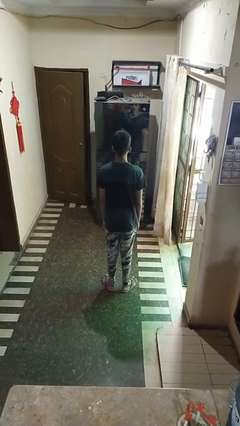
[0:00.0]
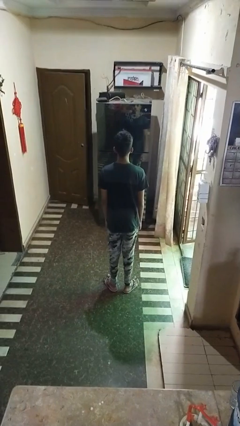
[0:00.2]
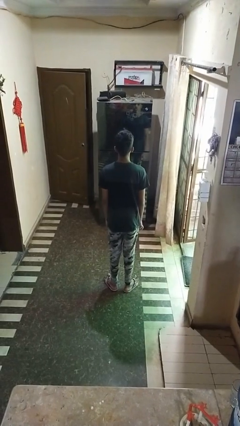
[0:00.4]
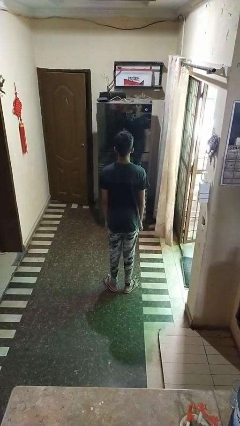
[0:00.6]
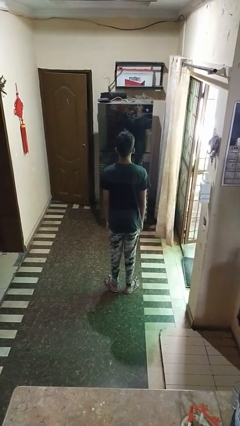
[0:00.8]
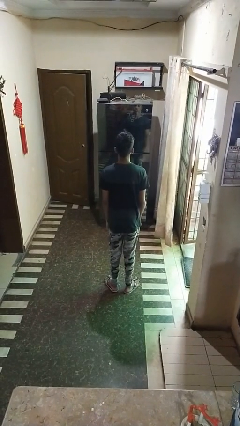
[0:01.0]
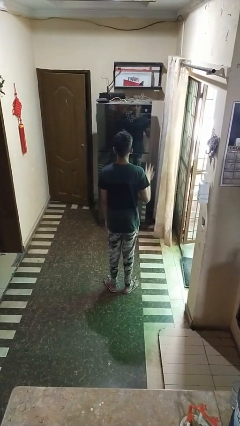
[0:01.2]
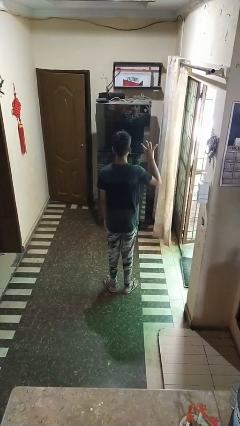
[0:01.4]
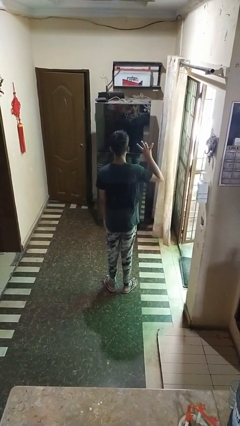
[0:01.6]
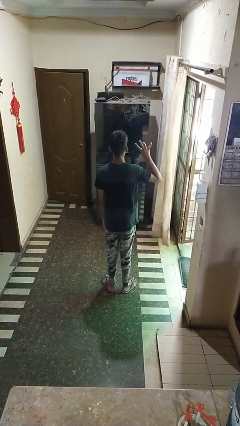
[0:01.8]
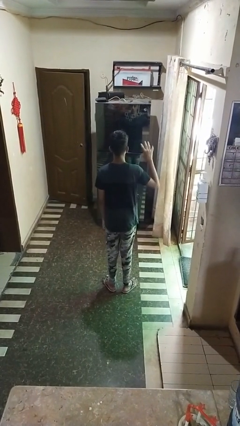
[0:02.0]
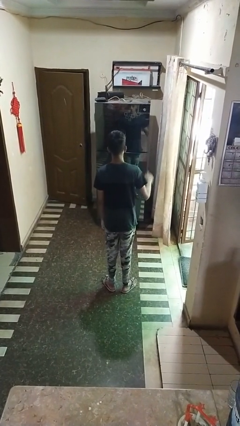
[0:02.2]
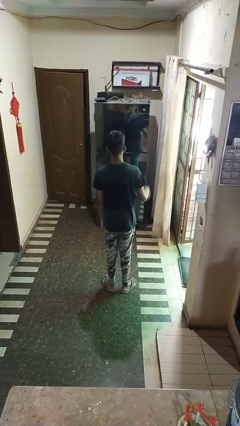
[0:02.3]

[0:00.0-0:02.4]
person gestures number four

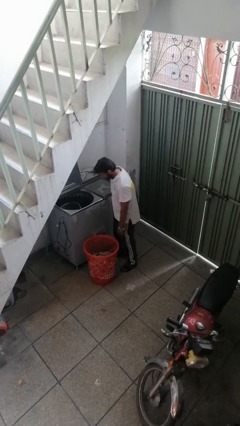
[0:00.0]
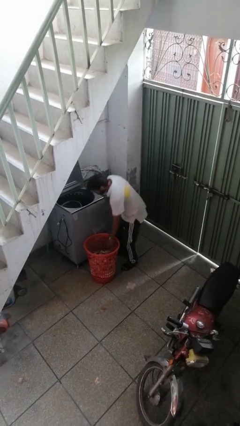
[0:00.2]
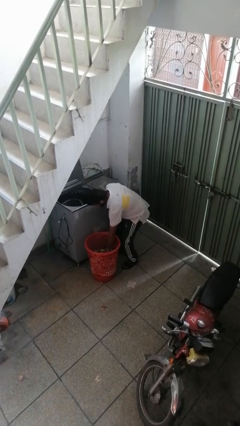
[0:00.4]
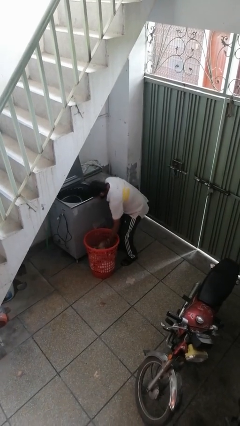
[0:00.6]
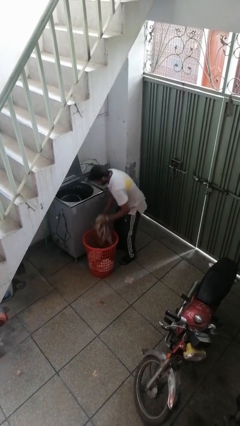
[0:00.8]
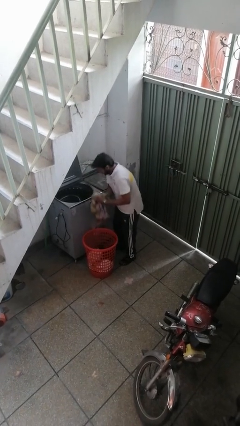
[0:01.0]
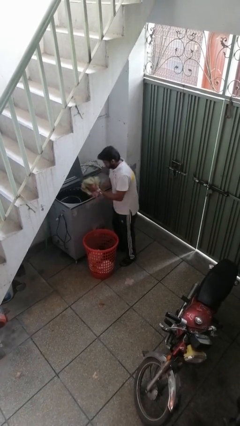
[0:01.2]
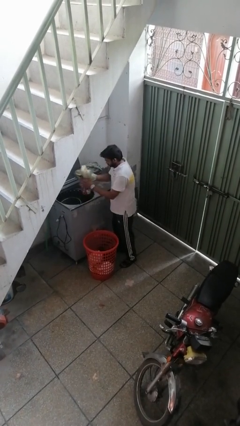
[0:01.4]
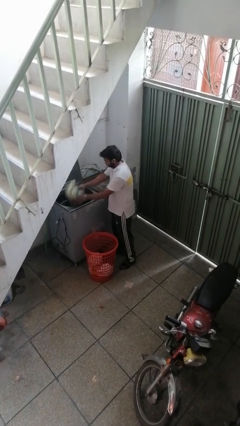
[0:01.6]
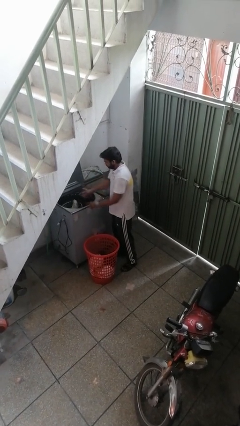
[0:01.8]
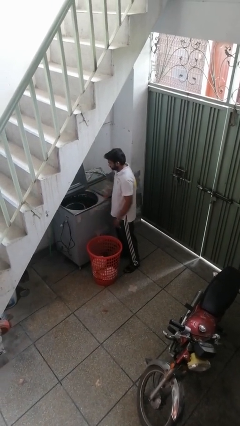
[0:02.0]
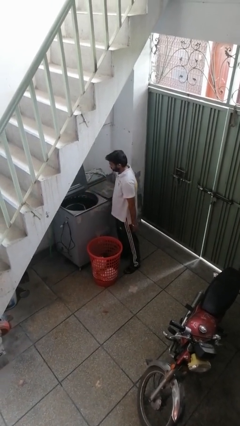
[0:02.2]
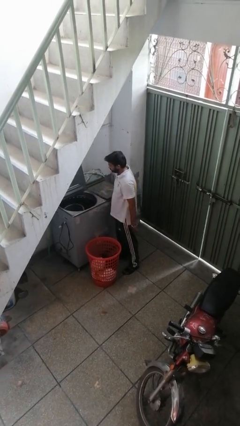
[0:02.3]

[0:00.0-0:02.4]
person loads clotheswasher

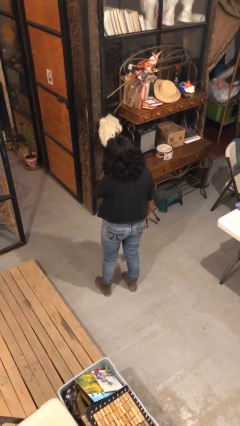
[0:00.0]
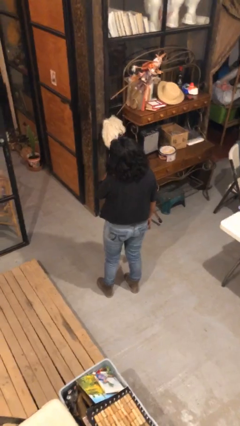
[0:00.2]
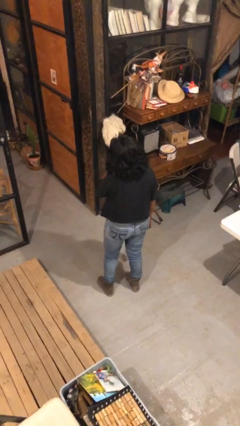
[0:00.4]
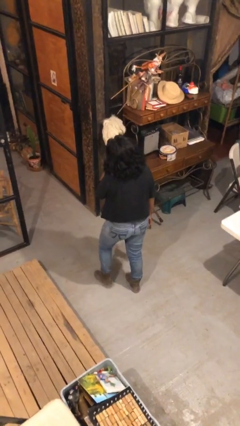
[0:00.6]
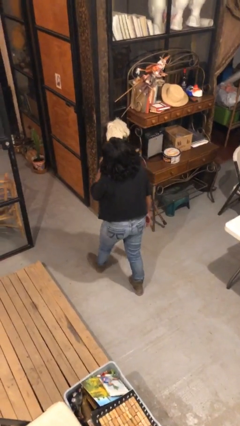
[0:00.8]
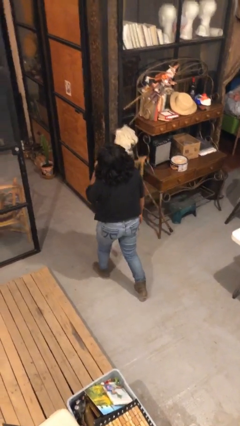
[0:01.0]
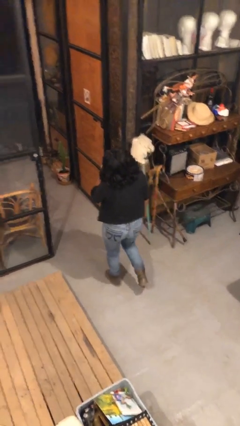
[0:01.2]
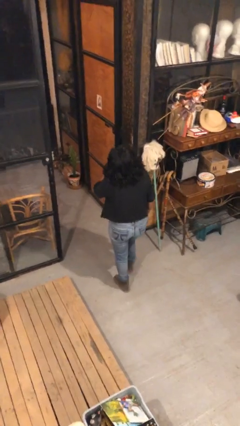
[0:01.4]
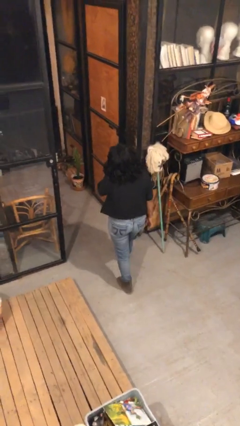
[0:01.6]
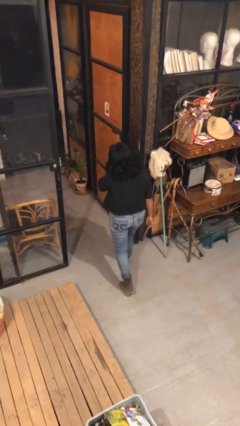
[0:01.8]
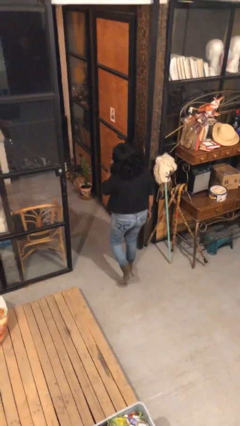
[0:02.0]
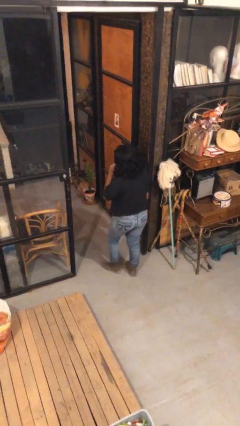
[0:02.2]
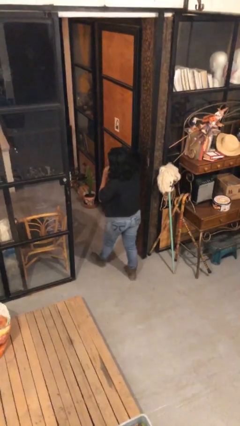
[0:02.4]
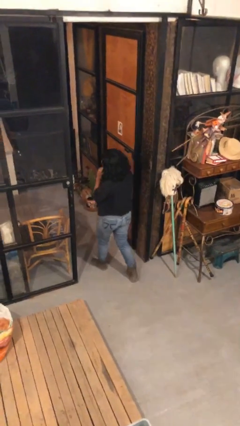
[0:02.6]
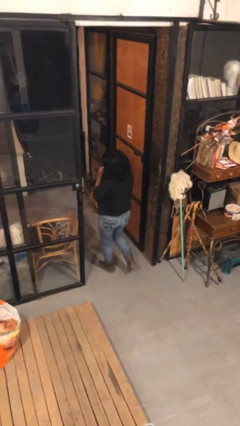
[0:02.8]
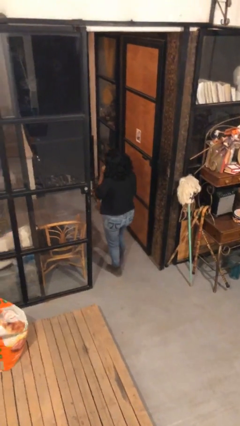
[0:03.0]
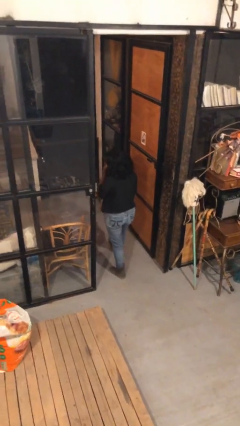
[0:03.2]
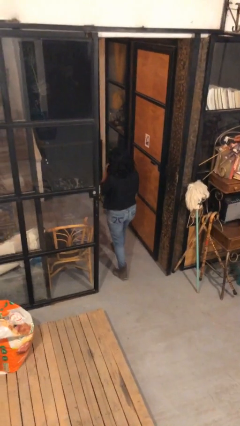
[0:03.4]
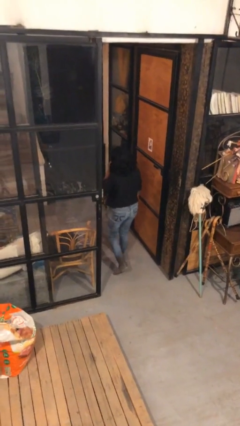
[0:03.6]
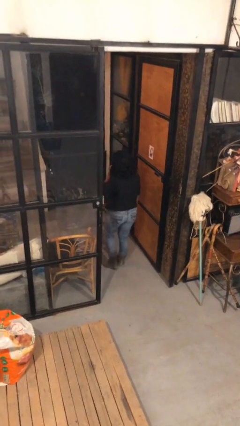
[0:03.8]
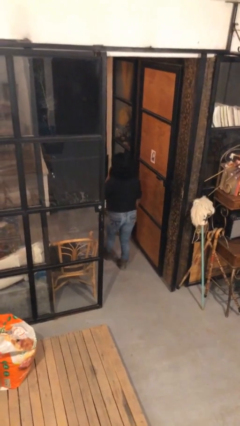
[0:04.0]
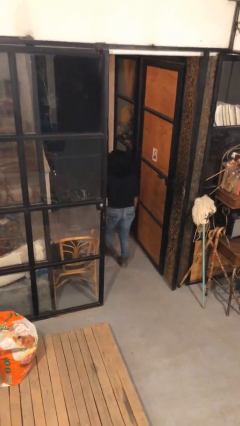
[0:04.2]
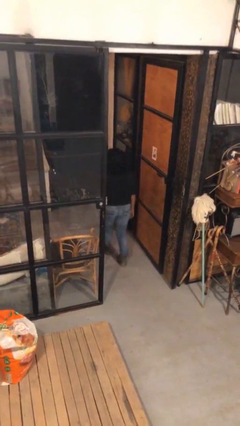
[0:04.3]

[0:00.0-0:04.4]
person exits scene through structure

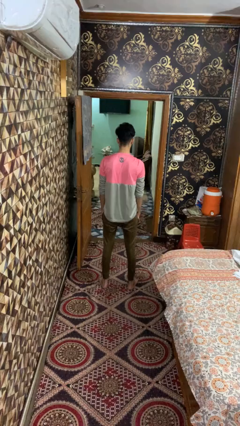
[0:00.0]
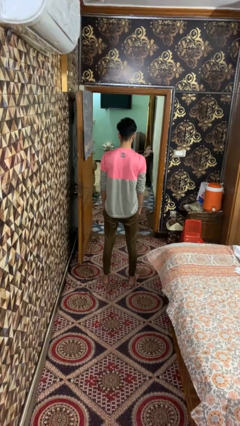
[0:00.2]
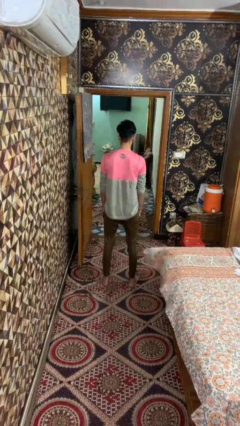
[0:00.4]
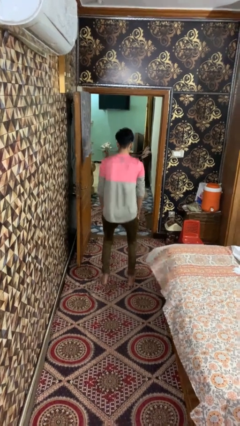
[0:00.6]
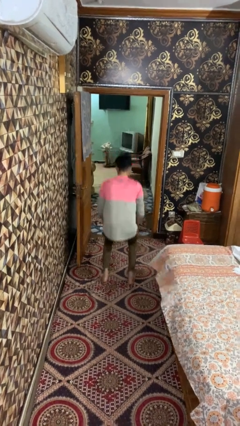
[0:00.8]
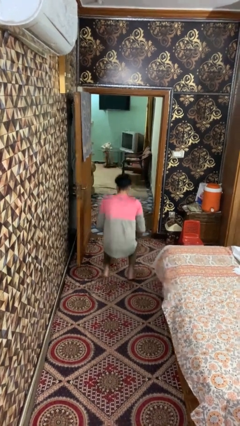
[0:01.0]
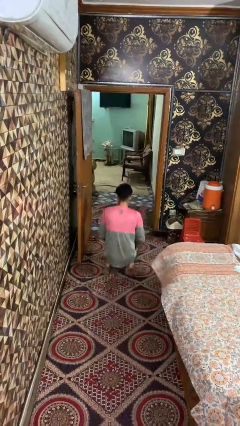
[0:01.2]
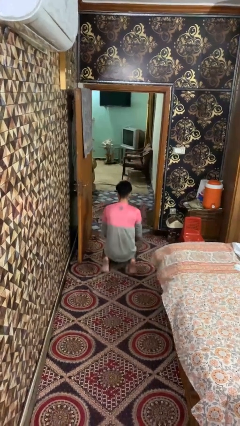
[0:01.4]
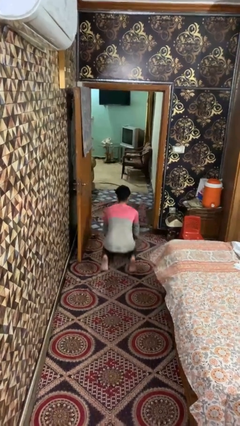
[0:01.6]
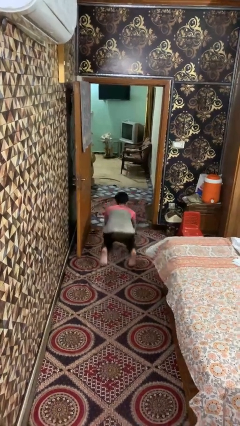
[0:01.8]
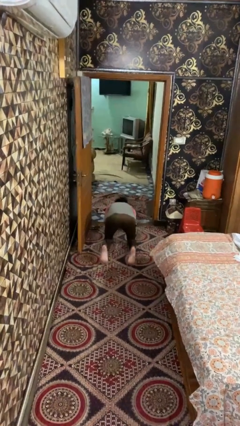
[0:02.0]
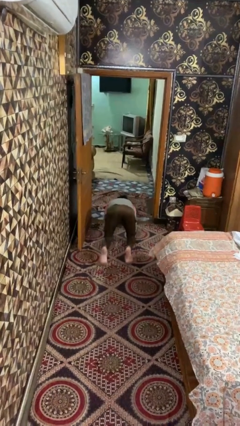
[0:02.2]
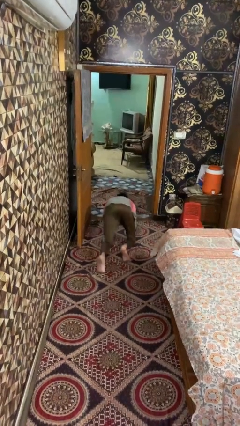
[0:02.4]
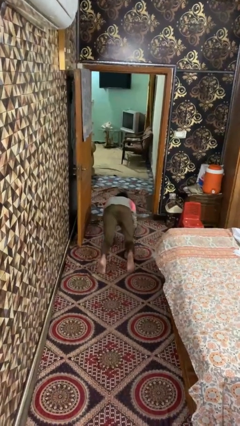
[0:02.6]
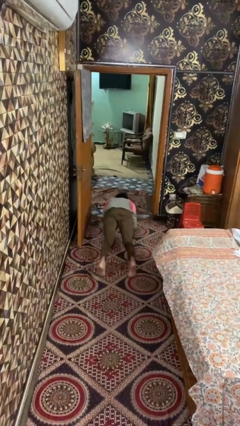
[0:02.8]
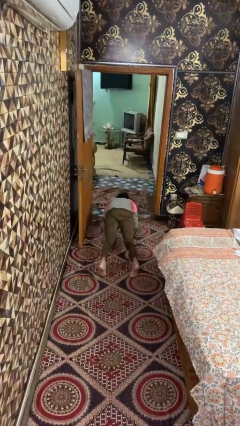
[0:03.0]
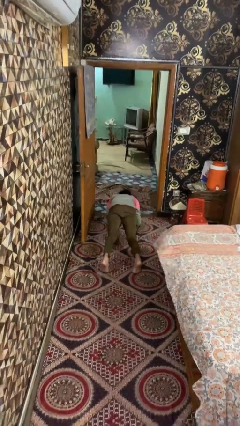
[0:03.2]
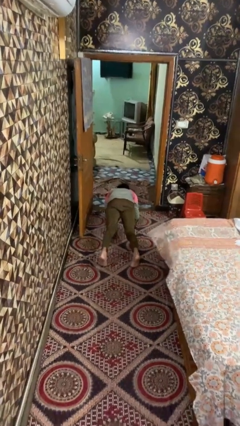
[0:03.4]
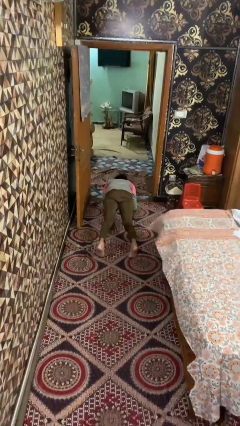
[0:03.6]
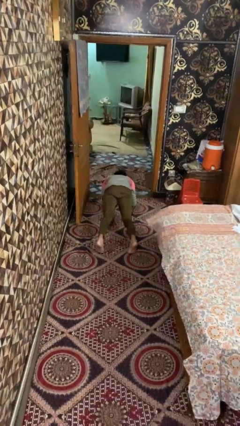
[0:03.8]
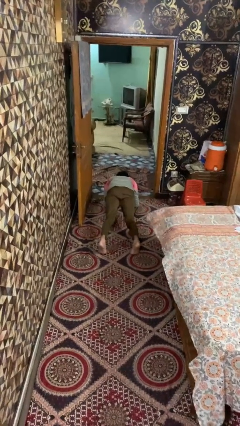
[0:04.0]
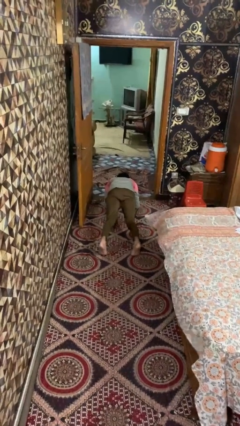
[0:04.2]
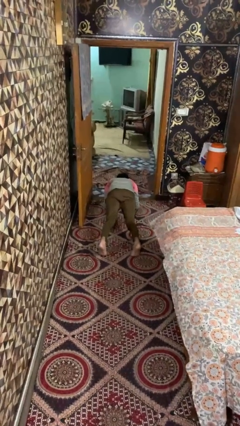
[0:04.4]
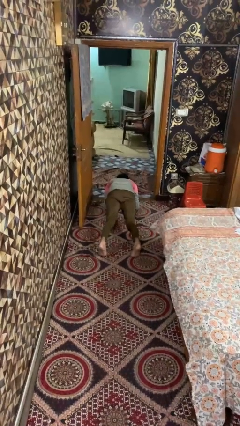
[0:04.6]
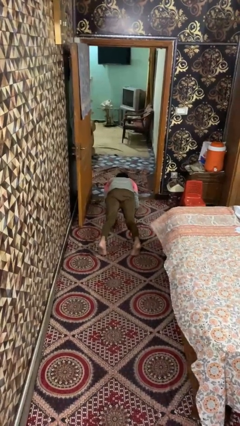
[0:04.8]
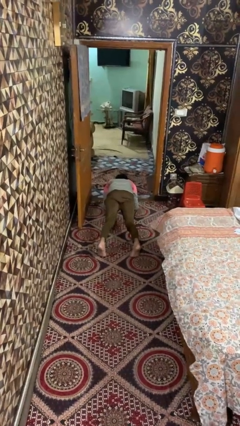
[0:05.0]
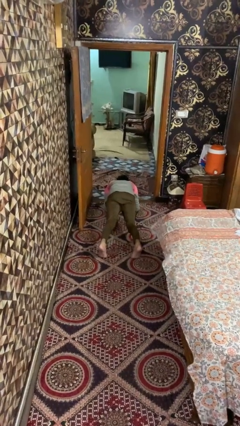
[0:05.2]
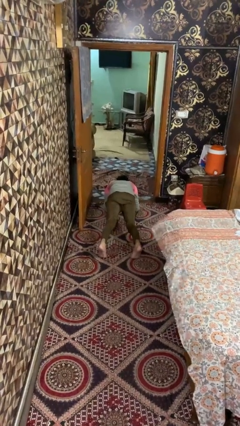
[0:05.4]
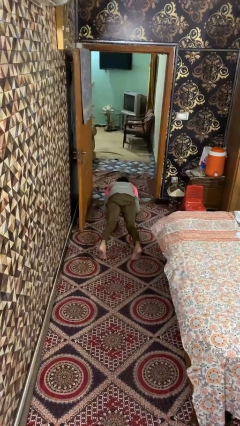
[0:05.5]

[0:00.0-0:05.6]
person exercises with plank

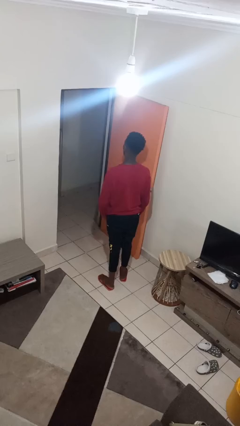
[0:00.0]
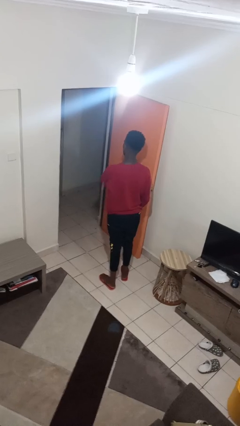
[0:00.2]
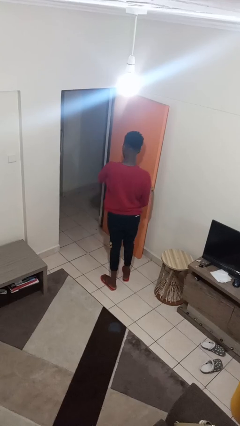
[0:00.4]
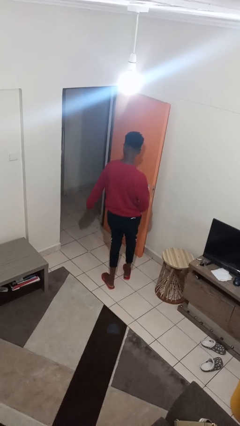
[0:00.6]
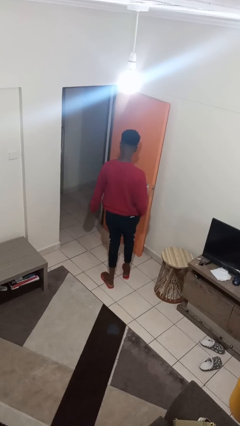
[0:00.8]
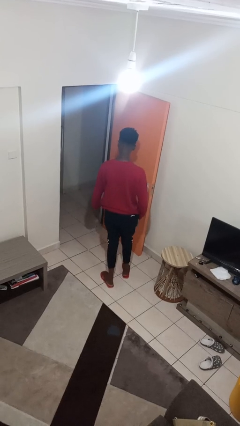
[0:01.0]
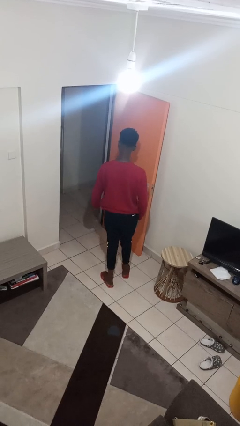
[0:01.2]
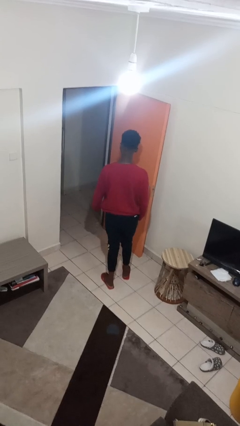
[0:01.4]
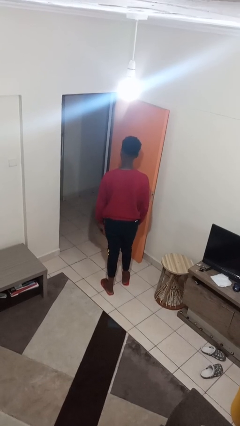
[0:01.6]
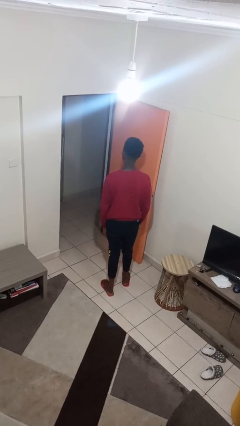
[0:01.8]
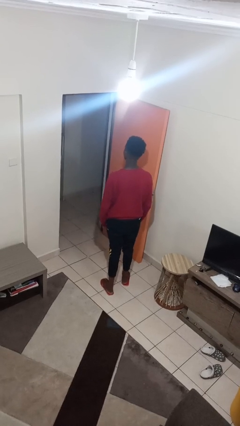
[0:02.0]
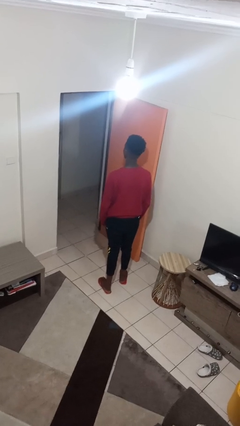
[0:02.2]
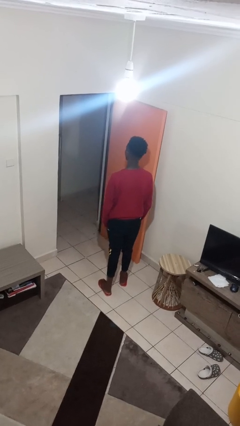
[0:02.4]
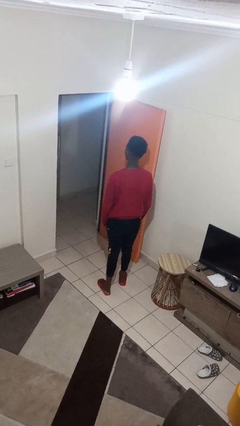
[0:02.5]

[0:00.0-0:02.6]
person karate chop

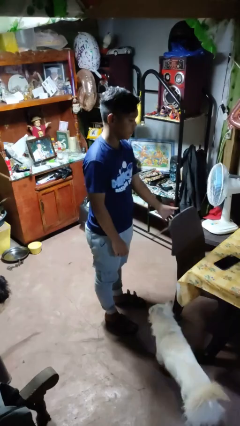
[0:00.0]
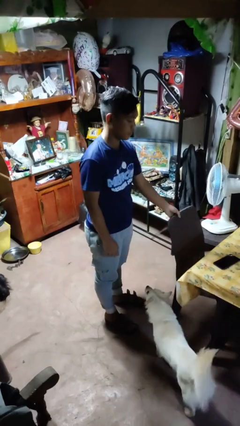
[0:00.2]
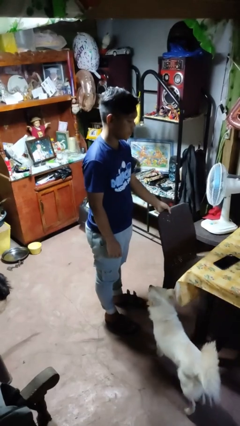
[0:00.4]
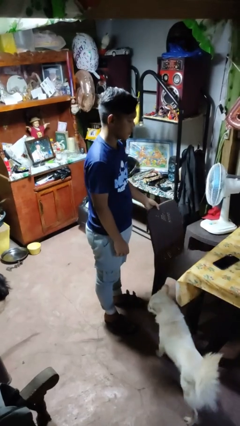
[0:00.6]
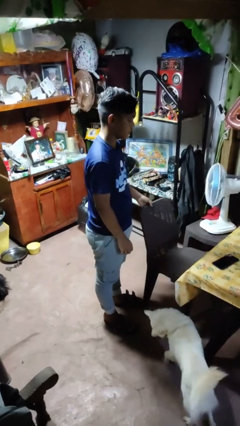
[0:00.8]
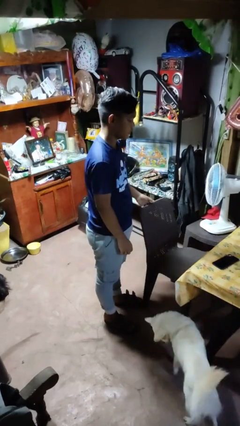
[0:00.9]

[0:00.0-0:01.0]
person pulls out chair
